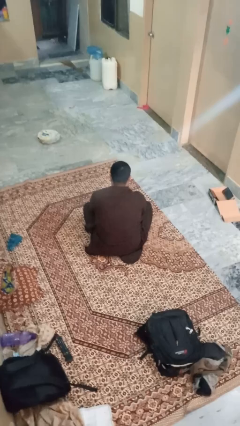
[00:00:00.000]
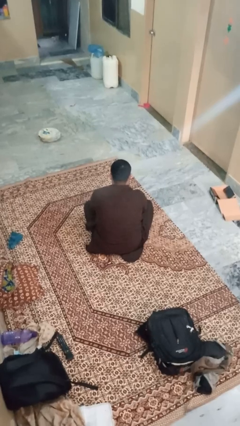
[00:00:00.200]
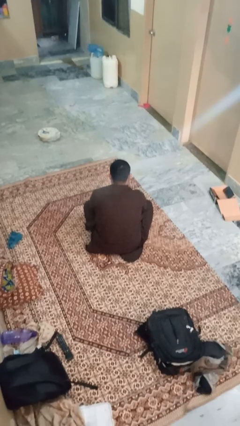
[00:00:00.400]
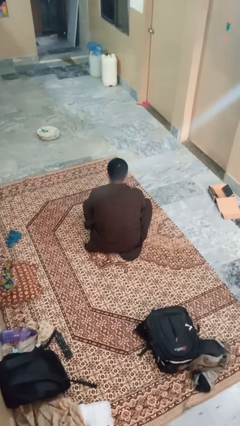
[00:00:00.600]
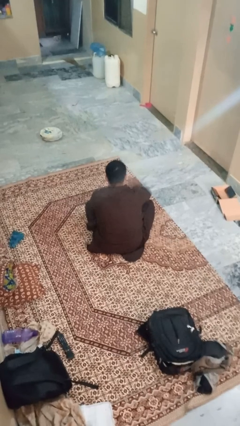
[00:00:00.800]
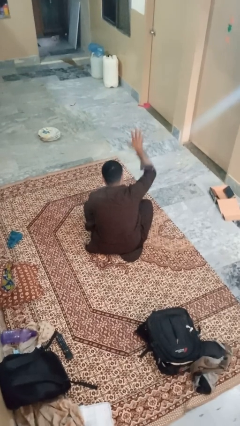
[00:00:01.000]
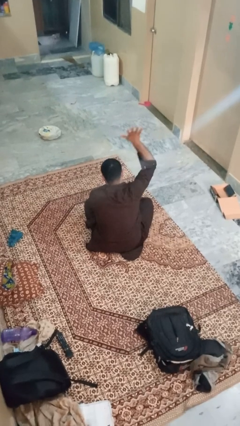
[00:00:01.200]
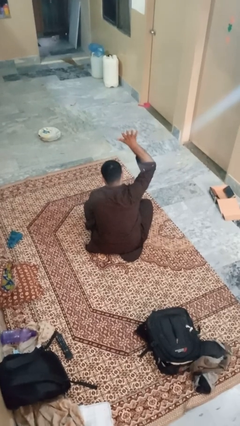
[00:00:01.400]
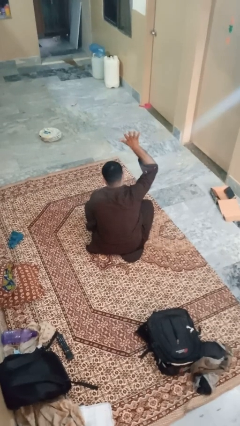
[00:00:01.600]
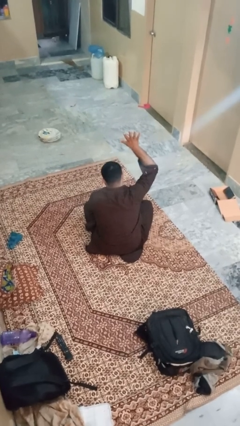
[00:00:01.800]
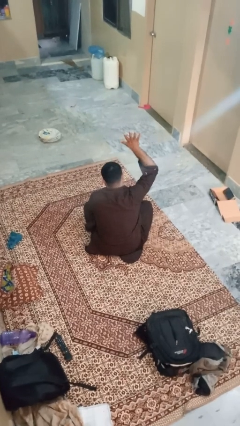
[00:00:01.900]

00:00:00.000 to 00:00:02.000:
person gestures number five

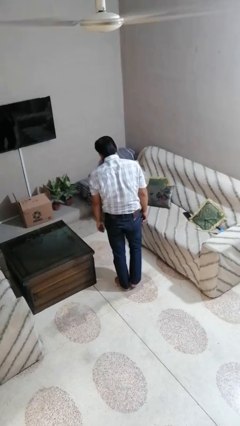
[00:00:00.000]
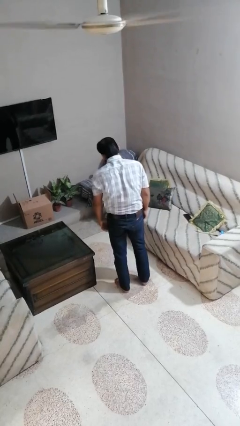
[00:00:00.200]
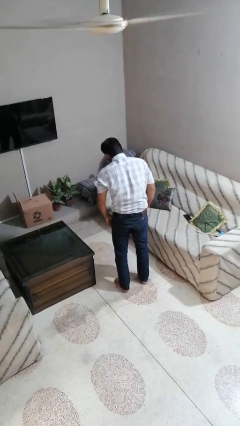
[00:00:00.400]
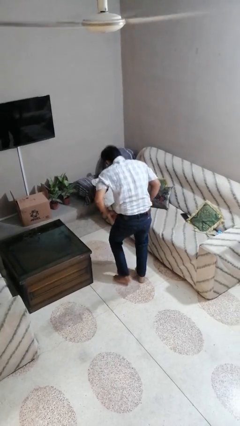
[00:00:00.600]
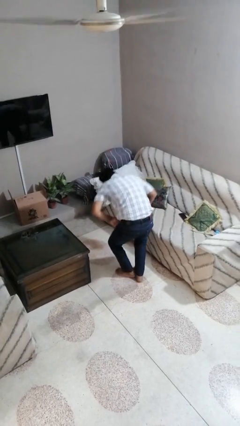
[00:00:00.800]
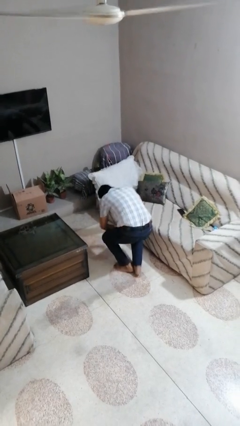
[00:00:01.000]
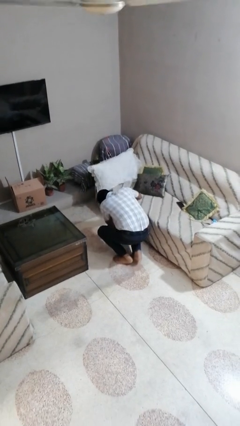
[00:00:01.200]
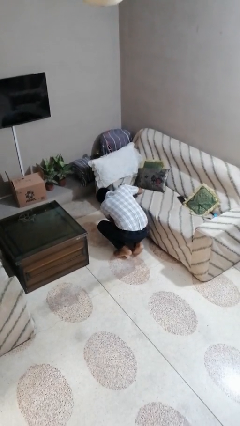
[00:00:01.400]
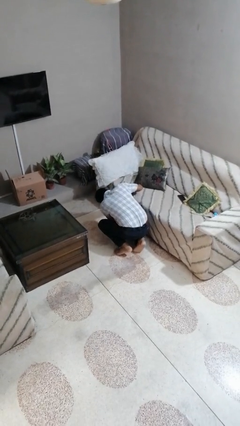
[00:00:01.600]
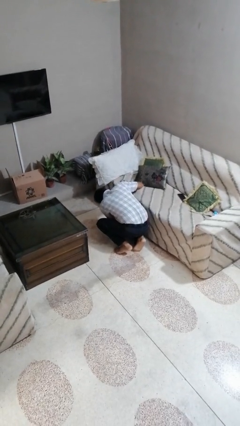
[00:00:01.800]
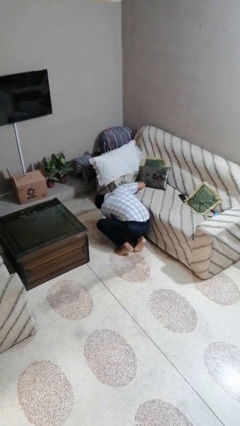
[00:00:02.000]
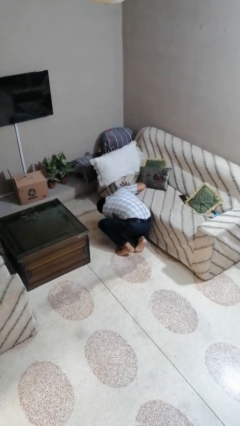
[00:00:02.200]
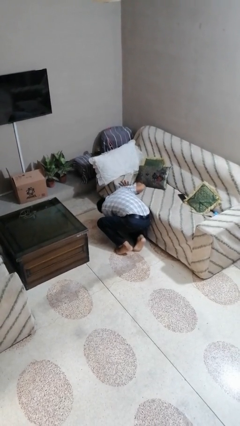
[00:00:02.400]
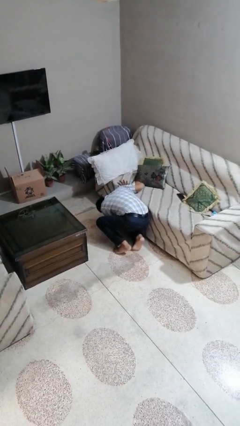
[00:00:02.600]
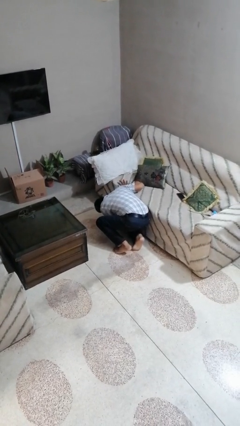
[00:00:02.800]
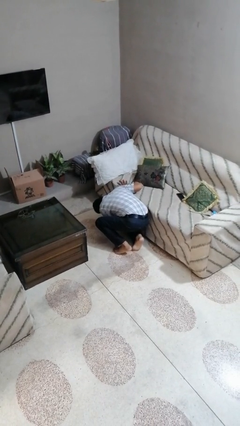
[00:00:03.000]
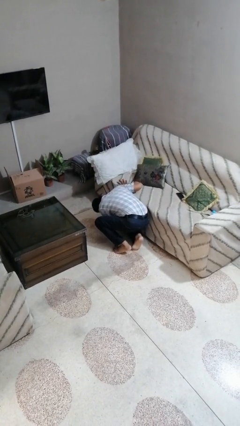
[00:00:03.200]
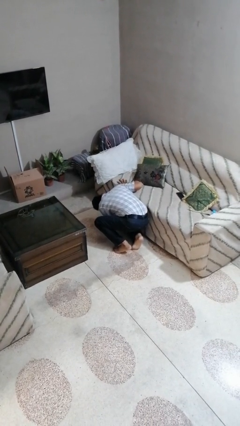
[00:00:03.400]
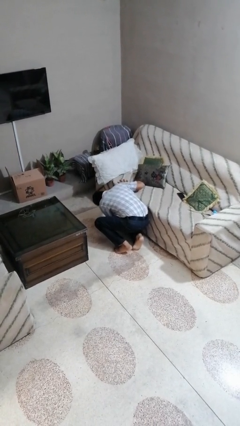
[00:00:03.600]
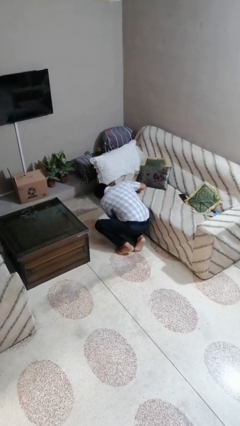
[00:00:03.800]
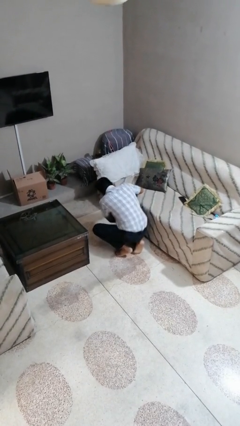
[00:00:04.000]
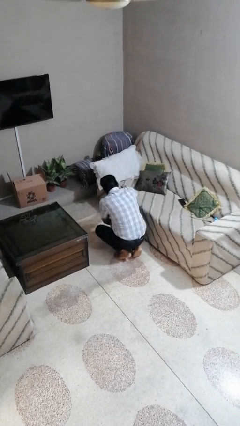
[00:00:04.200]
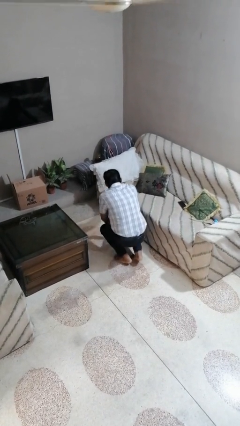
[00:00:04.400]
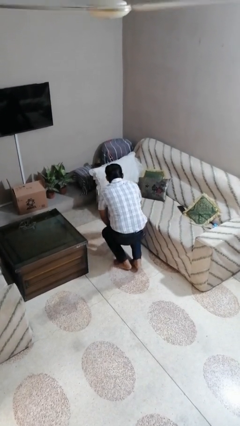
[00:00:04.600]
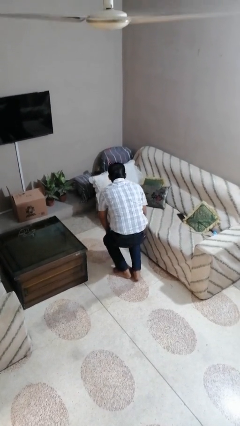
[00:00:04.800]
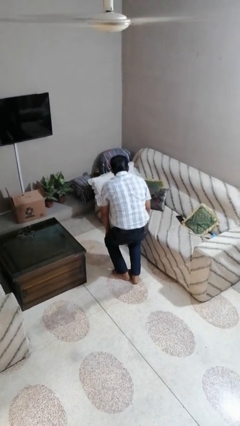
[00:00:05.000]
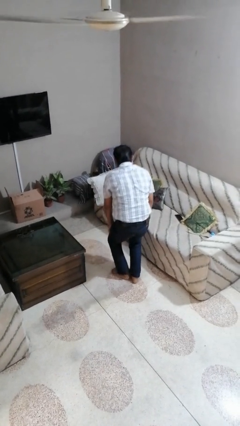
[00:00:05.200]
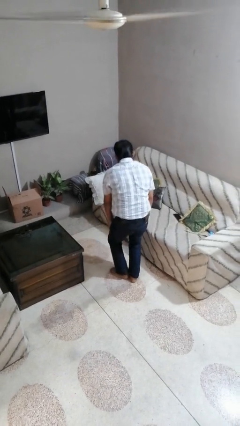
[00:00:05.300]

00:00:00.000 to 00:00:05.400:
person searches under couch

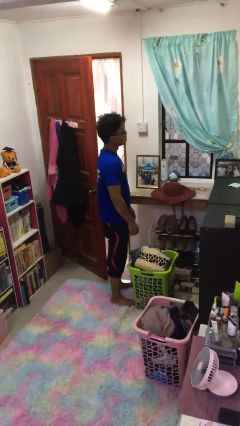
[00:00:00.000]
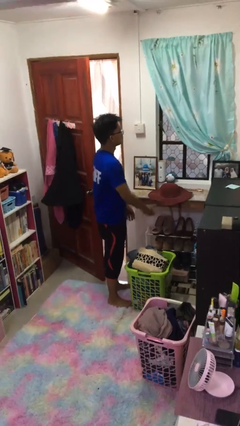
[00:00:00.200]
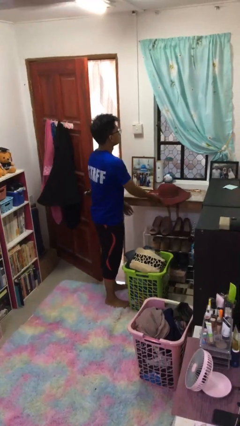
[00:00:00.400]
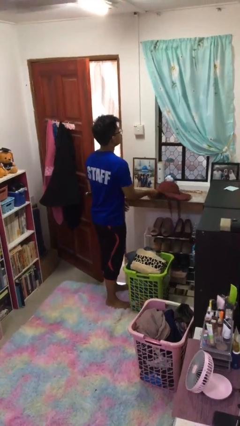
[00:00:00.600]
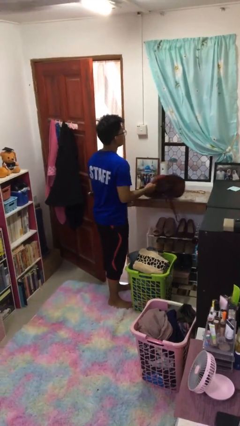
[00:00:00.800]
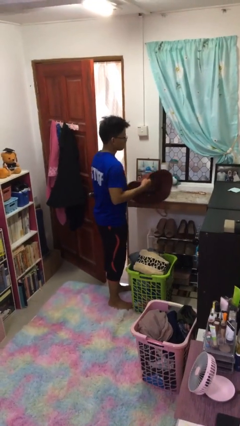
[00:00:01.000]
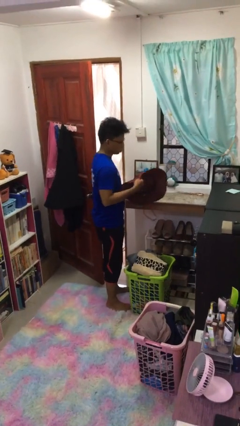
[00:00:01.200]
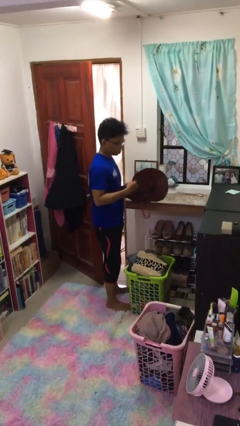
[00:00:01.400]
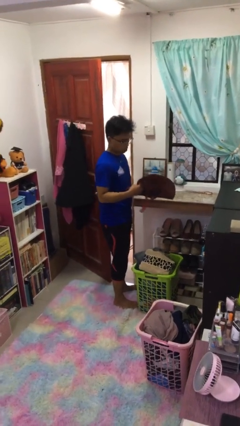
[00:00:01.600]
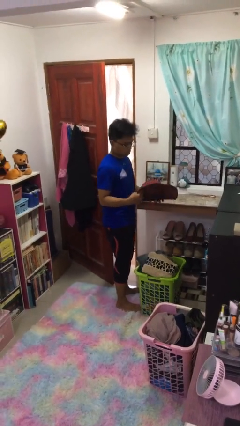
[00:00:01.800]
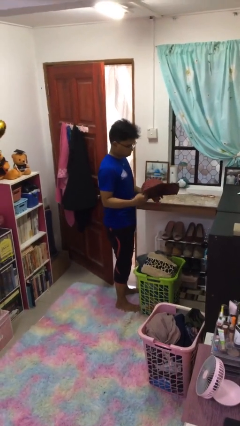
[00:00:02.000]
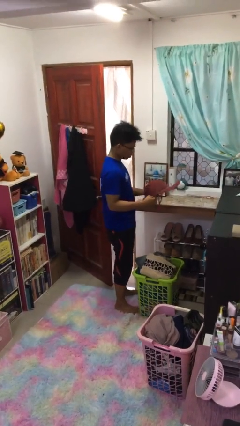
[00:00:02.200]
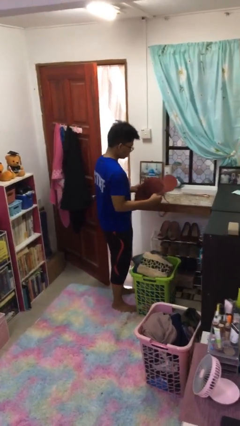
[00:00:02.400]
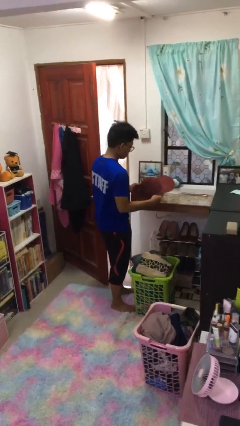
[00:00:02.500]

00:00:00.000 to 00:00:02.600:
person picks up object from countertop

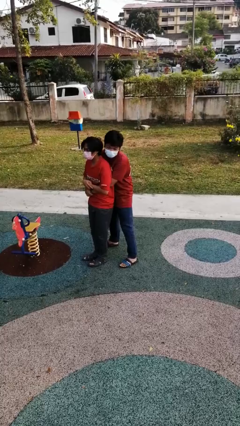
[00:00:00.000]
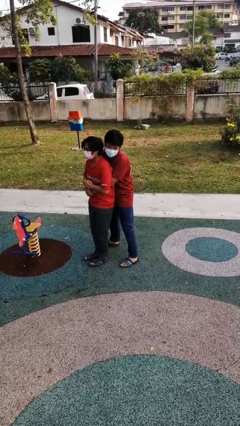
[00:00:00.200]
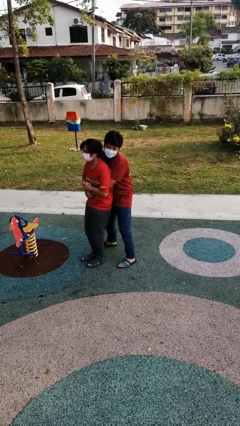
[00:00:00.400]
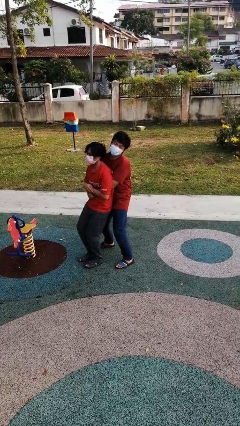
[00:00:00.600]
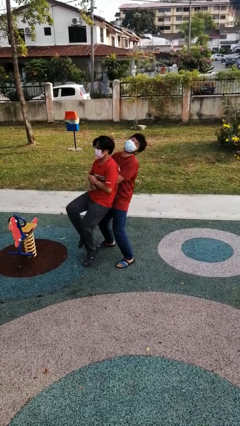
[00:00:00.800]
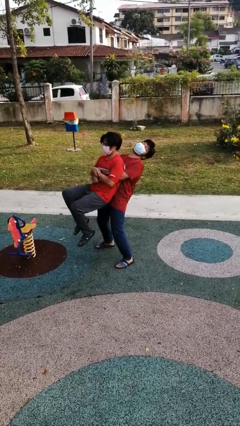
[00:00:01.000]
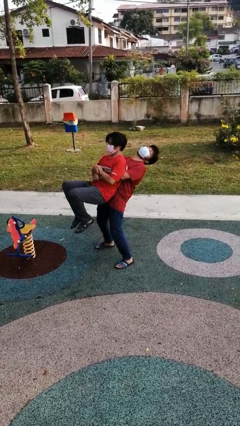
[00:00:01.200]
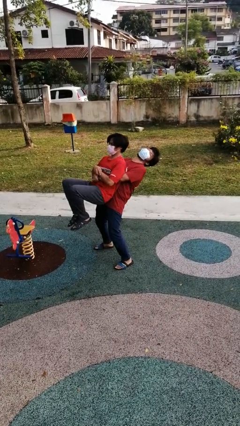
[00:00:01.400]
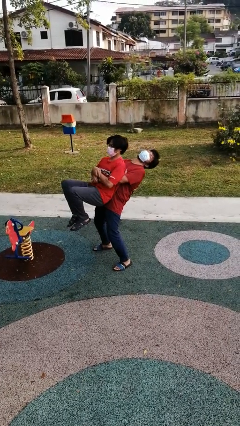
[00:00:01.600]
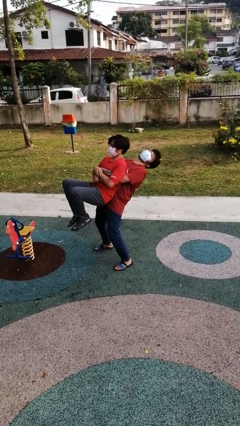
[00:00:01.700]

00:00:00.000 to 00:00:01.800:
person picks up person

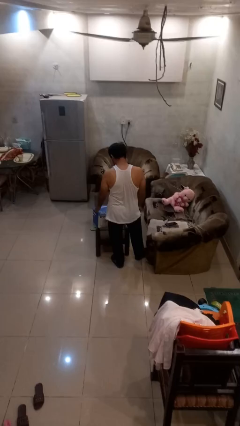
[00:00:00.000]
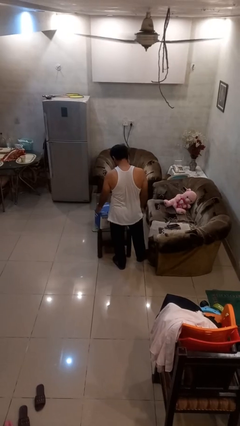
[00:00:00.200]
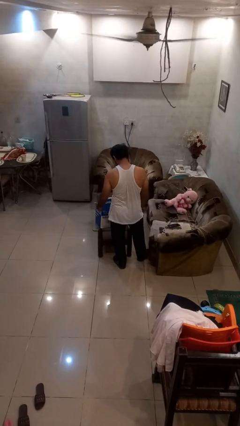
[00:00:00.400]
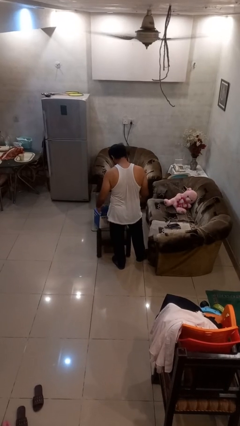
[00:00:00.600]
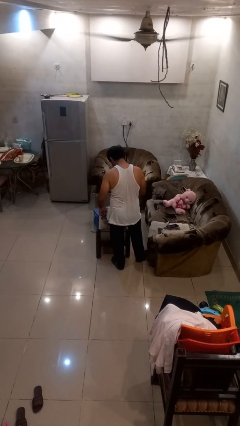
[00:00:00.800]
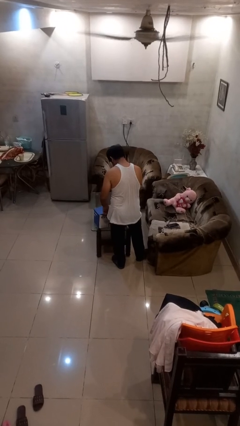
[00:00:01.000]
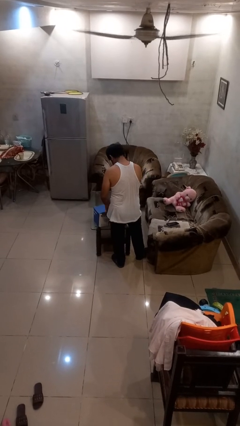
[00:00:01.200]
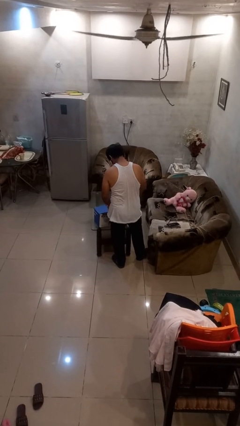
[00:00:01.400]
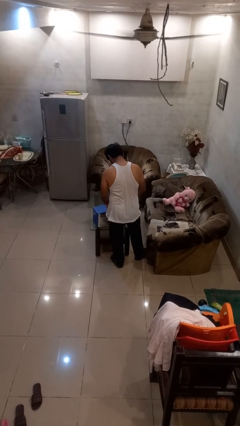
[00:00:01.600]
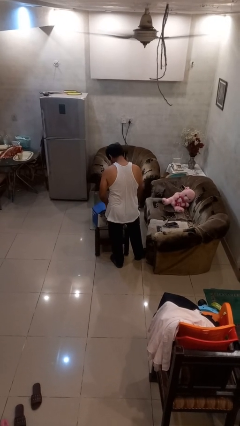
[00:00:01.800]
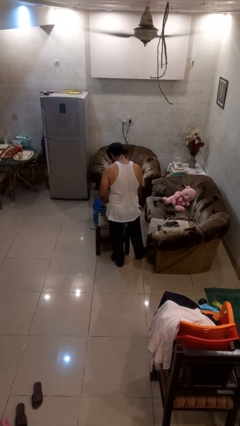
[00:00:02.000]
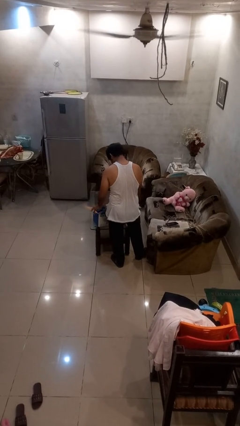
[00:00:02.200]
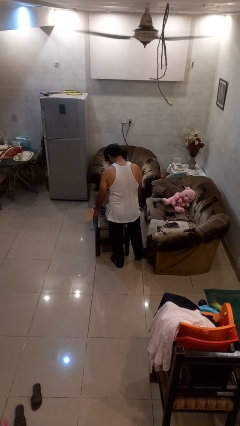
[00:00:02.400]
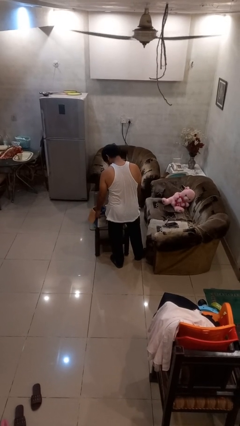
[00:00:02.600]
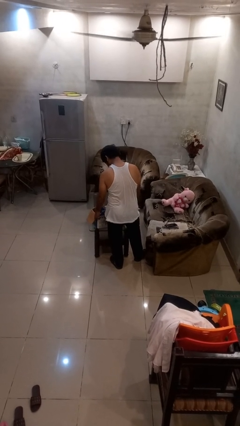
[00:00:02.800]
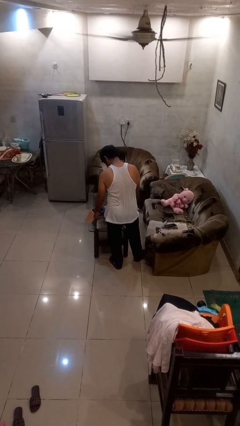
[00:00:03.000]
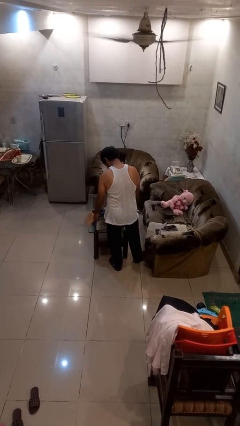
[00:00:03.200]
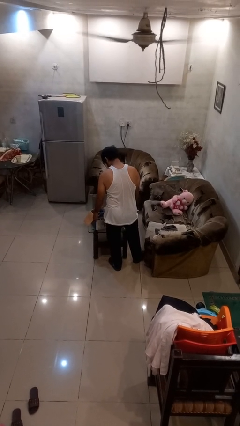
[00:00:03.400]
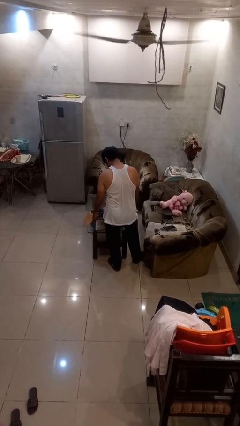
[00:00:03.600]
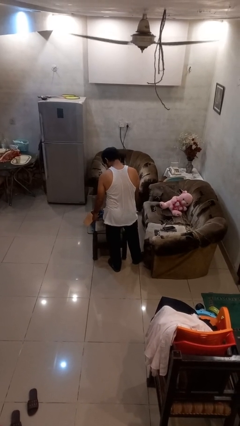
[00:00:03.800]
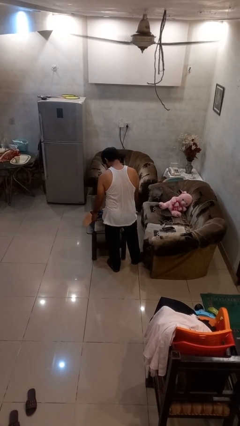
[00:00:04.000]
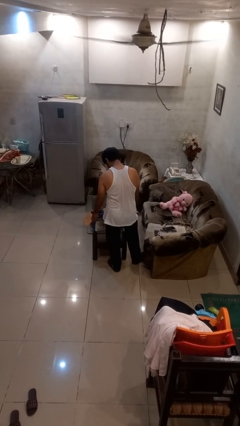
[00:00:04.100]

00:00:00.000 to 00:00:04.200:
person opens box

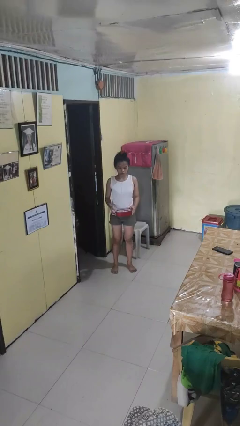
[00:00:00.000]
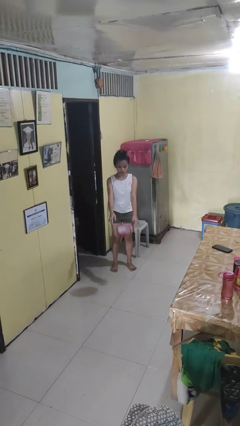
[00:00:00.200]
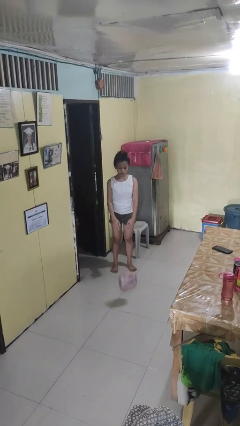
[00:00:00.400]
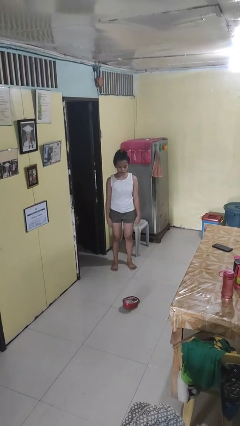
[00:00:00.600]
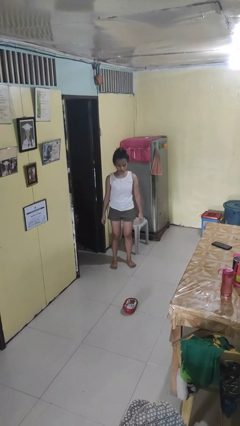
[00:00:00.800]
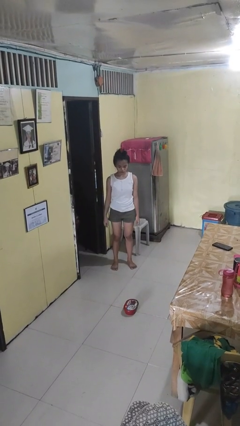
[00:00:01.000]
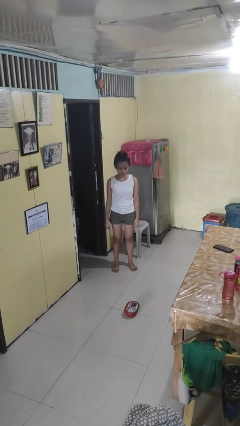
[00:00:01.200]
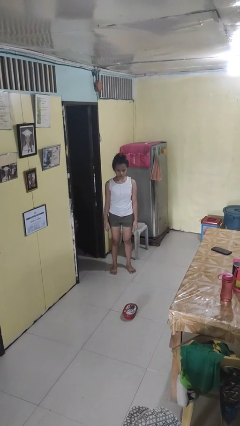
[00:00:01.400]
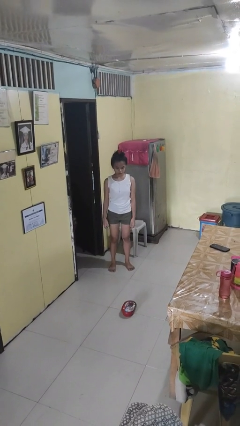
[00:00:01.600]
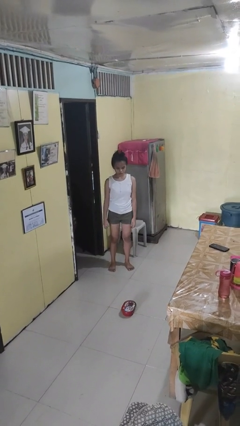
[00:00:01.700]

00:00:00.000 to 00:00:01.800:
person throws object to ground
